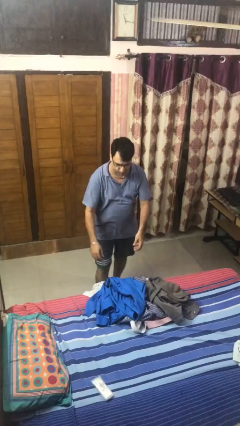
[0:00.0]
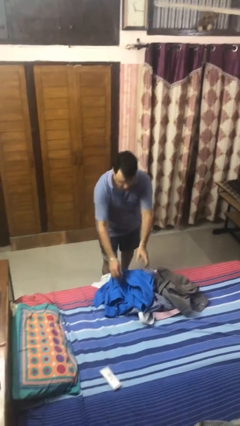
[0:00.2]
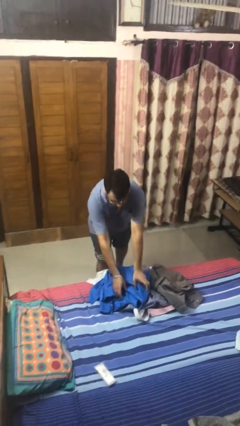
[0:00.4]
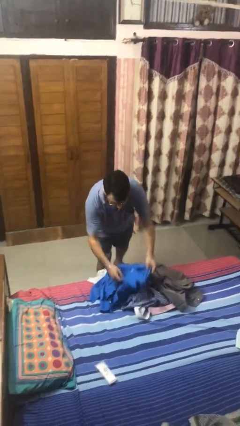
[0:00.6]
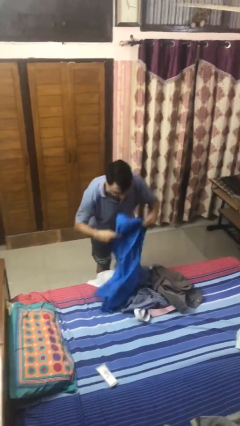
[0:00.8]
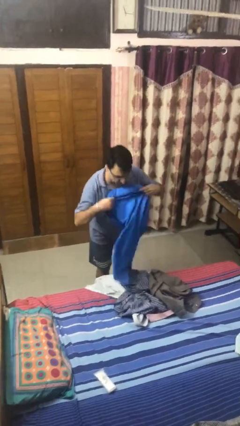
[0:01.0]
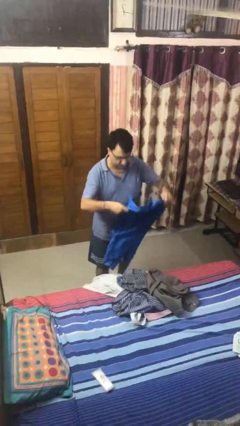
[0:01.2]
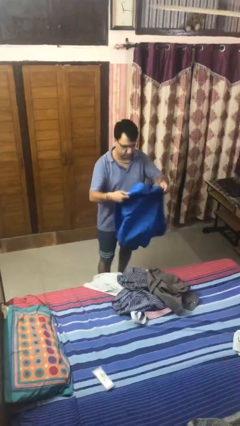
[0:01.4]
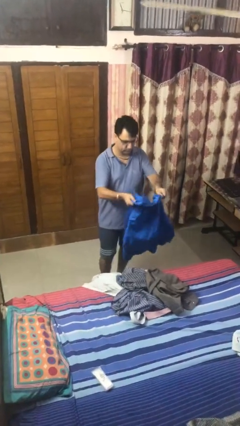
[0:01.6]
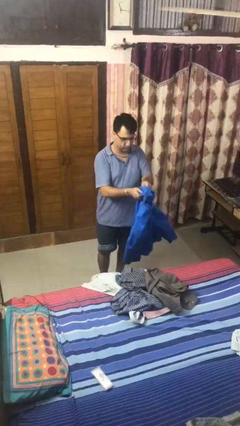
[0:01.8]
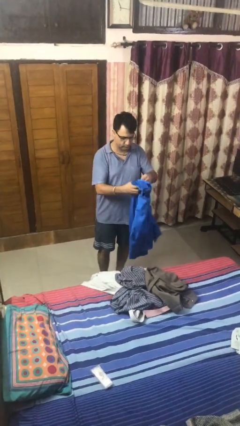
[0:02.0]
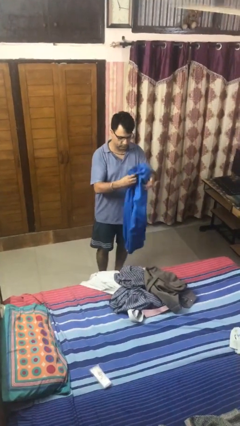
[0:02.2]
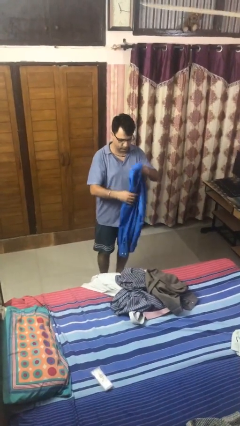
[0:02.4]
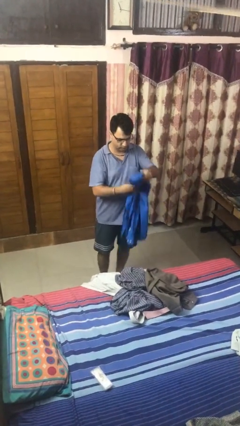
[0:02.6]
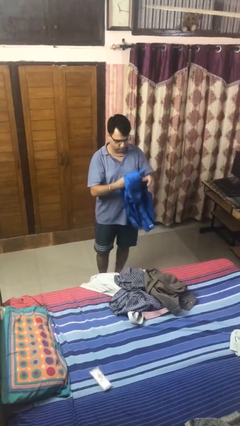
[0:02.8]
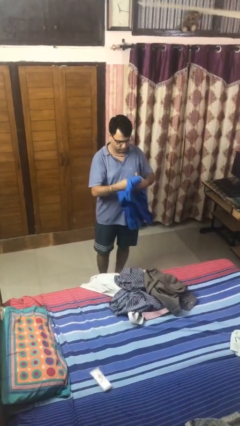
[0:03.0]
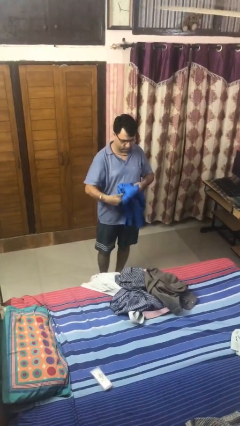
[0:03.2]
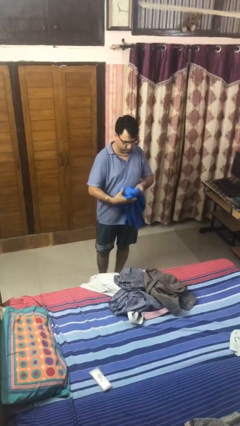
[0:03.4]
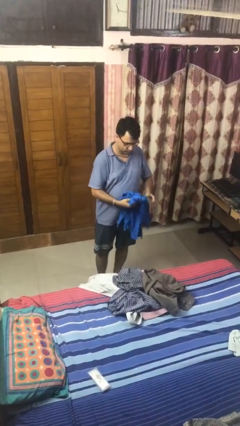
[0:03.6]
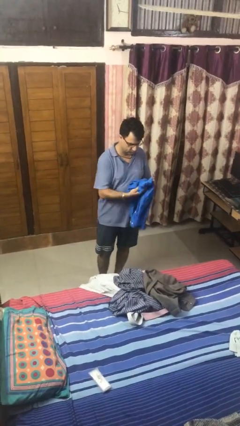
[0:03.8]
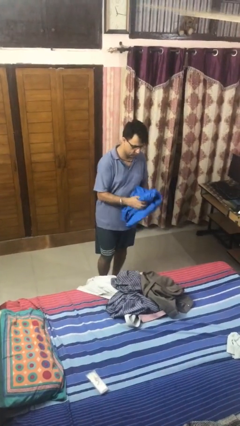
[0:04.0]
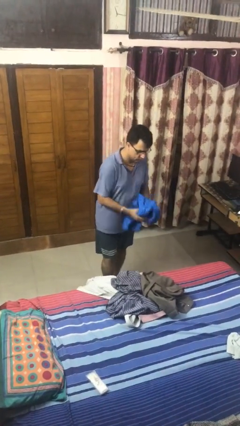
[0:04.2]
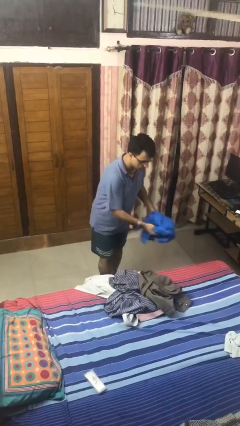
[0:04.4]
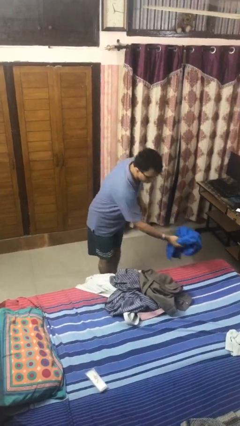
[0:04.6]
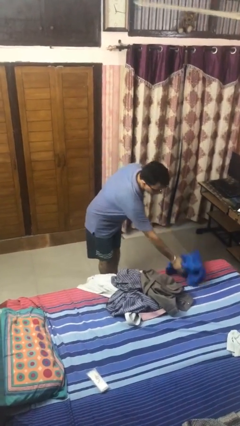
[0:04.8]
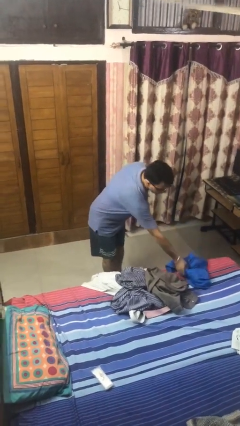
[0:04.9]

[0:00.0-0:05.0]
person folds shirt

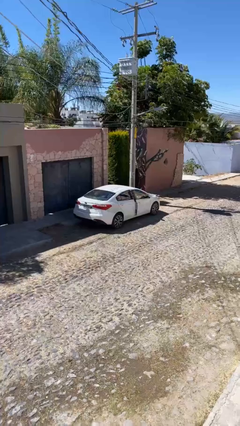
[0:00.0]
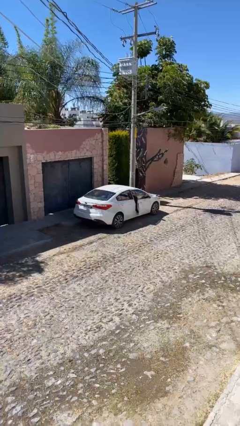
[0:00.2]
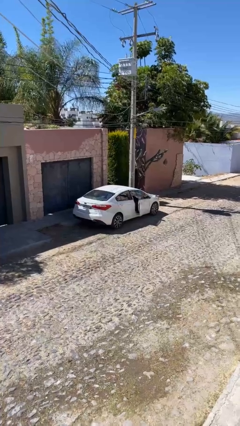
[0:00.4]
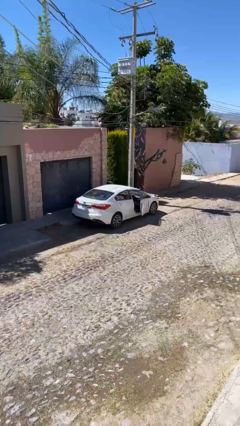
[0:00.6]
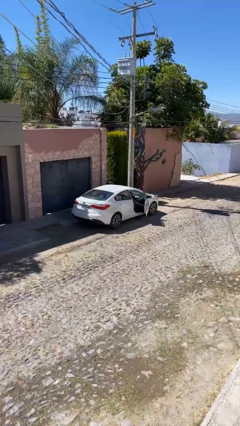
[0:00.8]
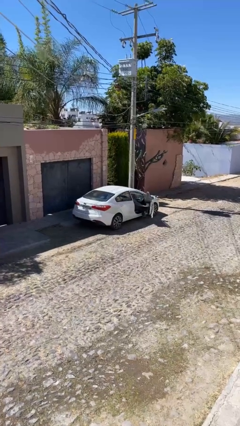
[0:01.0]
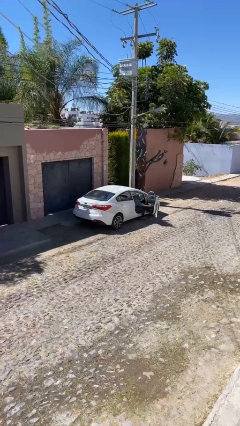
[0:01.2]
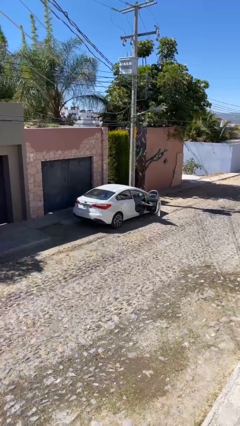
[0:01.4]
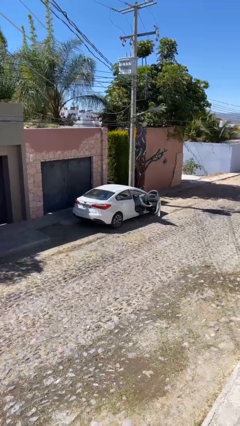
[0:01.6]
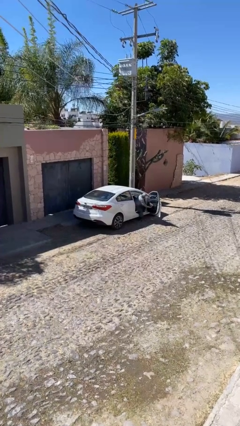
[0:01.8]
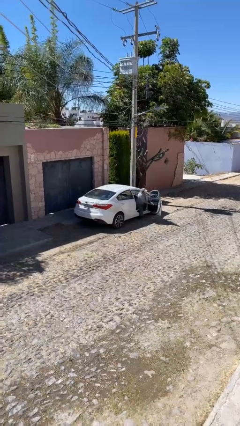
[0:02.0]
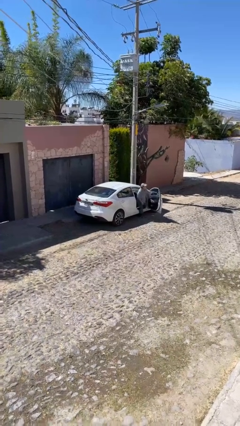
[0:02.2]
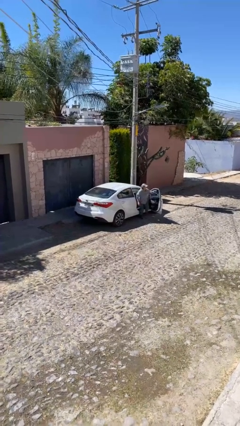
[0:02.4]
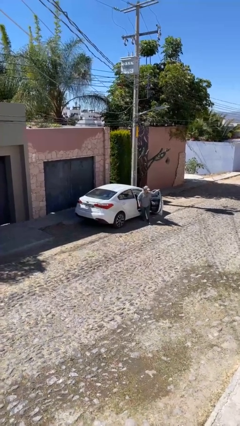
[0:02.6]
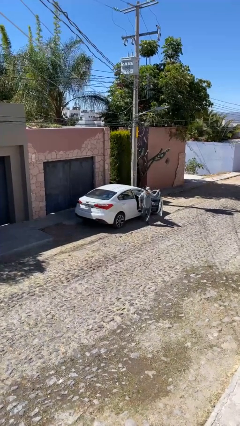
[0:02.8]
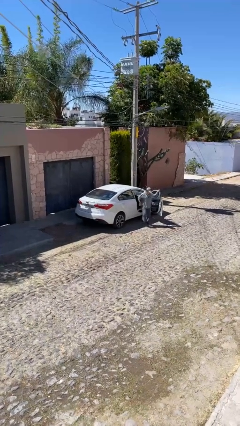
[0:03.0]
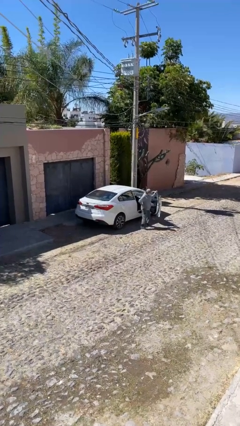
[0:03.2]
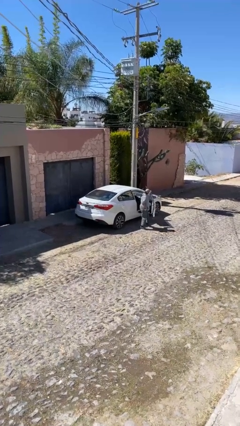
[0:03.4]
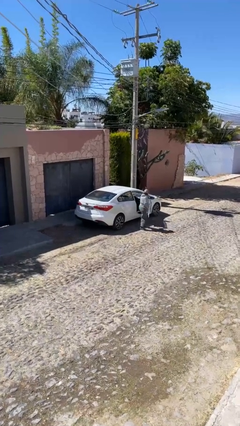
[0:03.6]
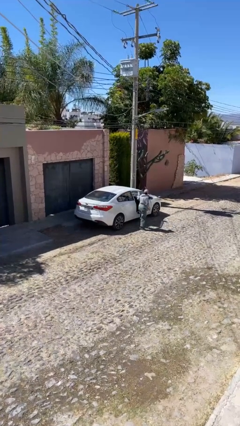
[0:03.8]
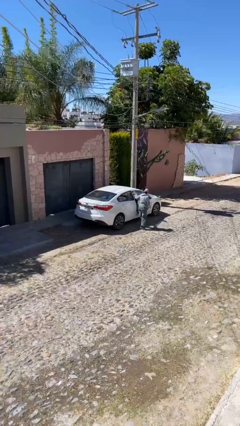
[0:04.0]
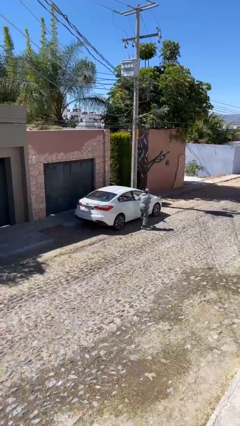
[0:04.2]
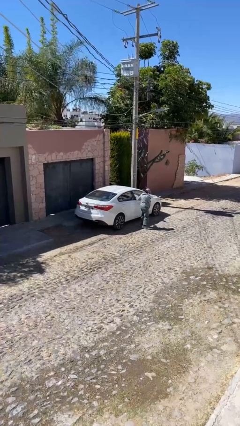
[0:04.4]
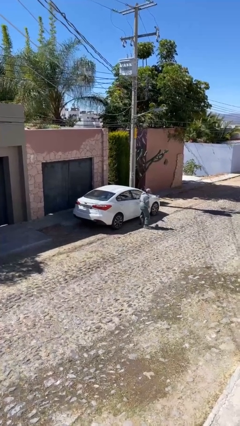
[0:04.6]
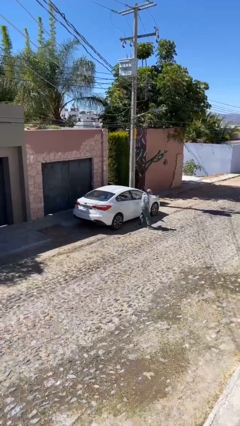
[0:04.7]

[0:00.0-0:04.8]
car drops off person

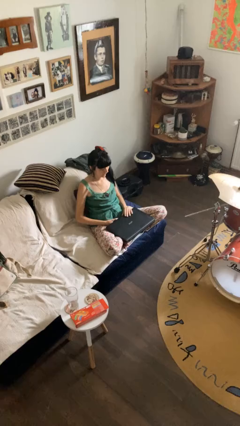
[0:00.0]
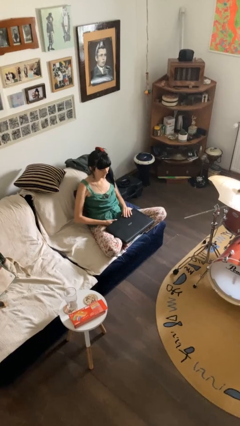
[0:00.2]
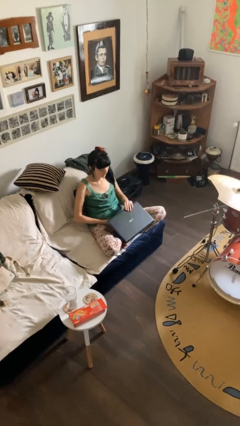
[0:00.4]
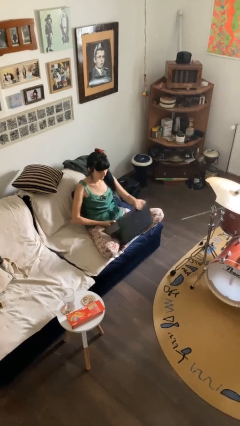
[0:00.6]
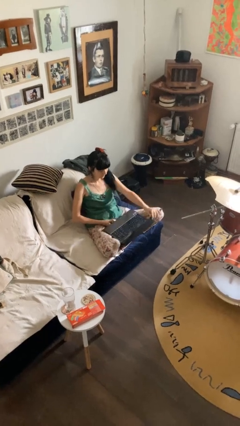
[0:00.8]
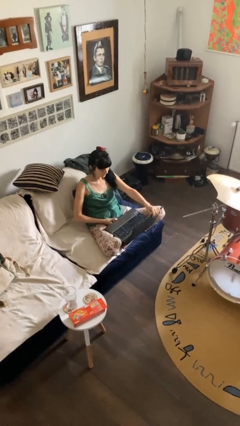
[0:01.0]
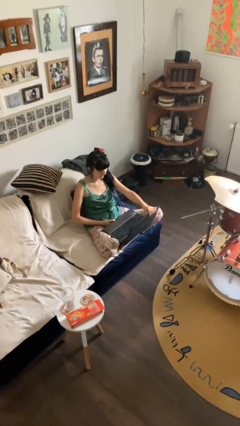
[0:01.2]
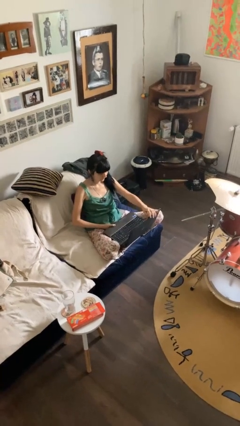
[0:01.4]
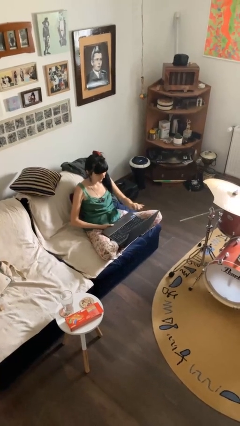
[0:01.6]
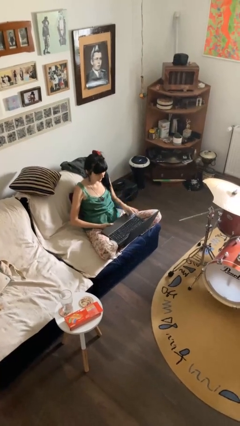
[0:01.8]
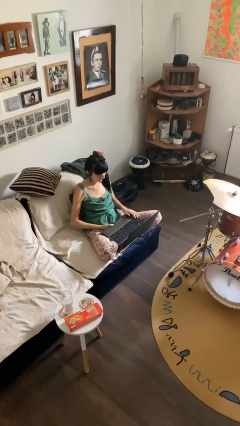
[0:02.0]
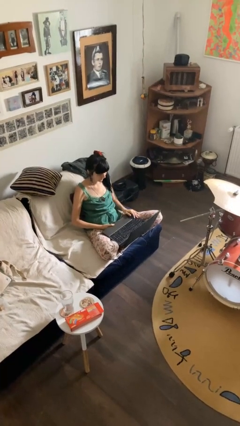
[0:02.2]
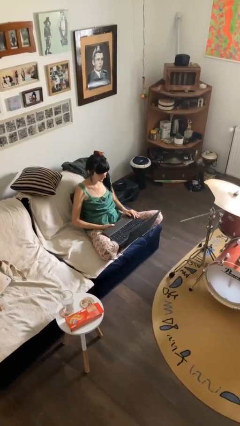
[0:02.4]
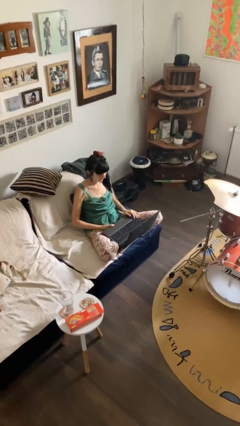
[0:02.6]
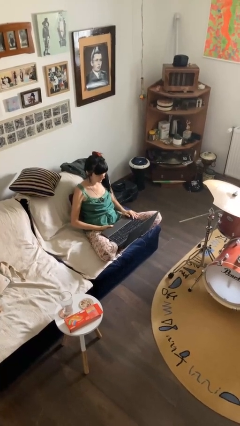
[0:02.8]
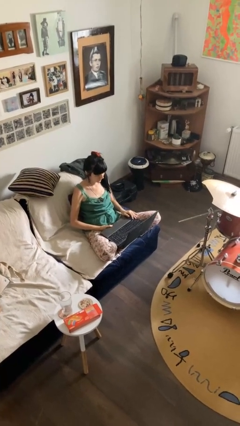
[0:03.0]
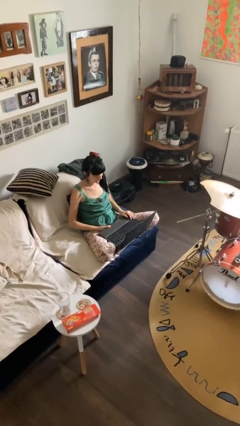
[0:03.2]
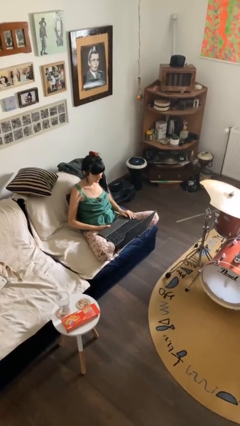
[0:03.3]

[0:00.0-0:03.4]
person opens laptop

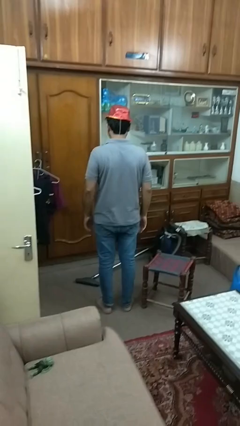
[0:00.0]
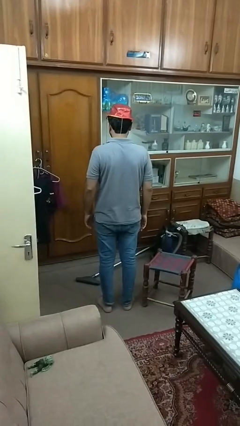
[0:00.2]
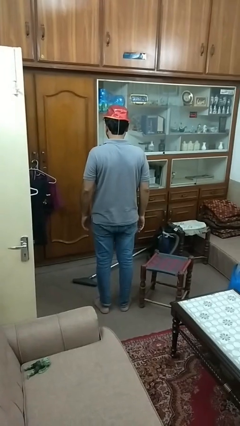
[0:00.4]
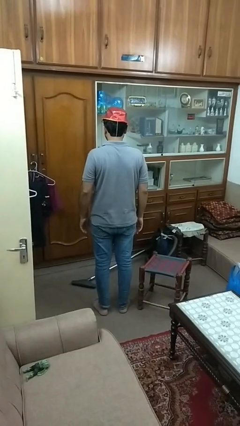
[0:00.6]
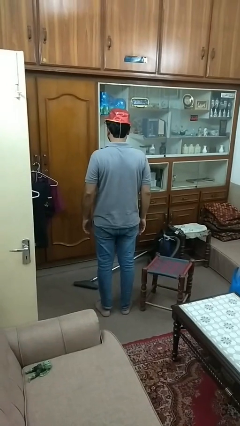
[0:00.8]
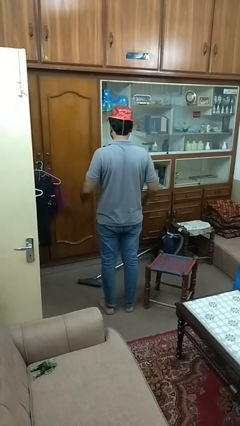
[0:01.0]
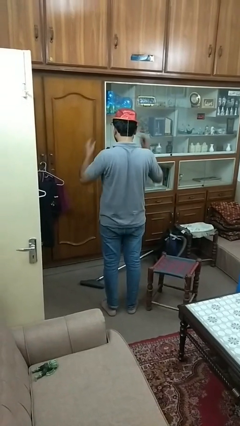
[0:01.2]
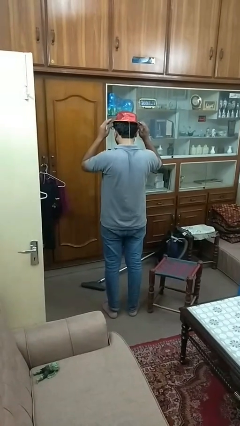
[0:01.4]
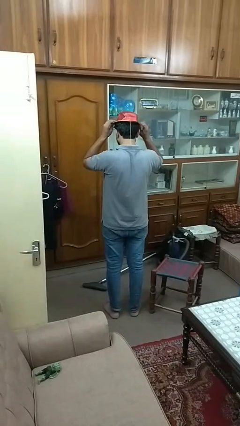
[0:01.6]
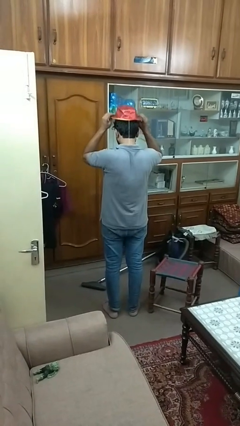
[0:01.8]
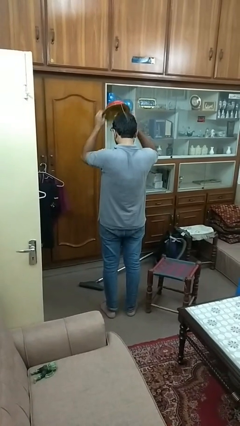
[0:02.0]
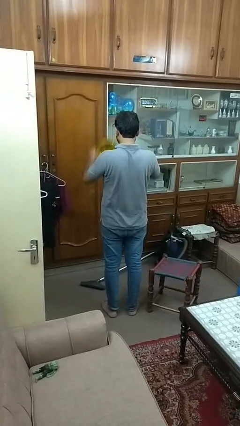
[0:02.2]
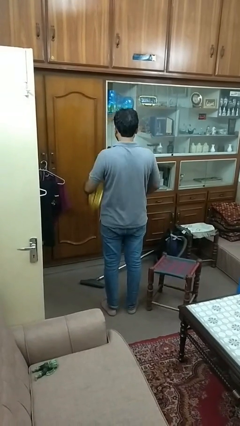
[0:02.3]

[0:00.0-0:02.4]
person takes off hat

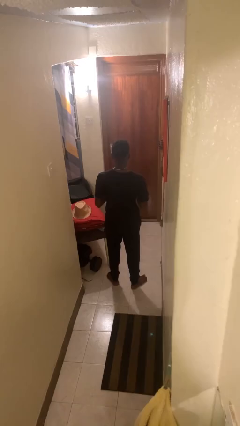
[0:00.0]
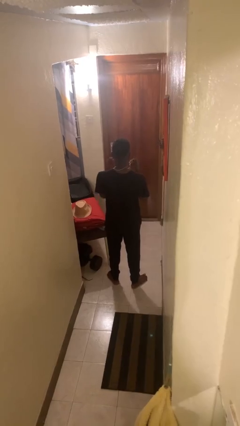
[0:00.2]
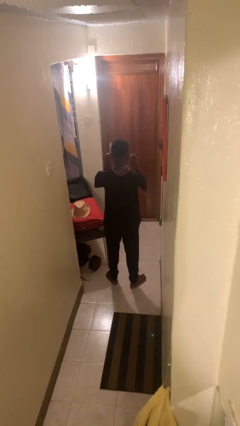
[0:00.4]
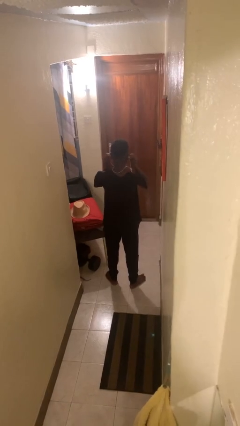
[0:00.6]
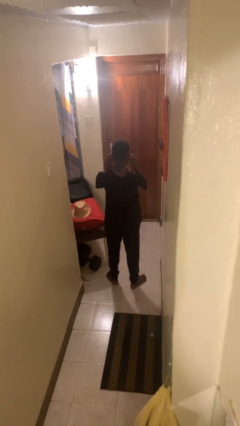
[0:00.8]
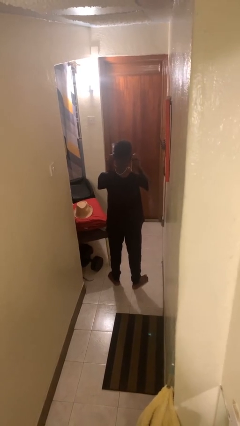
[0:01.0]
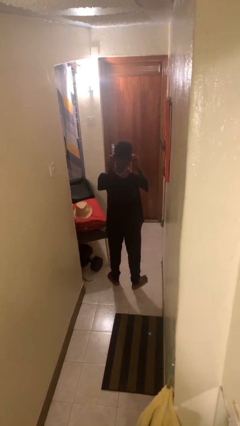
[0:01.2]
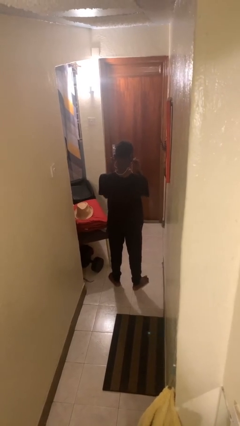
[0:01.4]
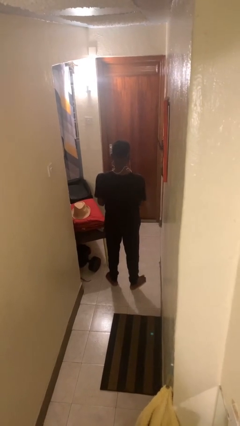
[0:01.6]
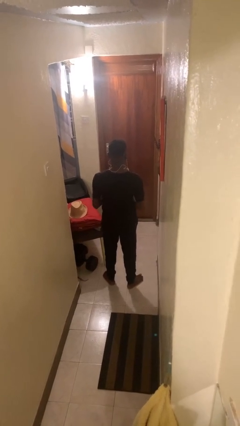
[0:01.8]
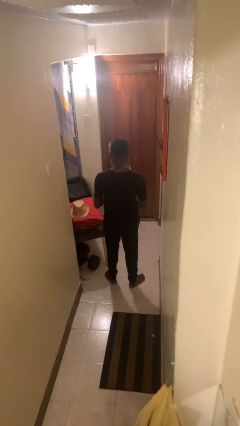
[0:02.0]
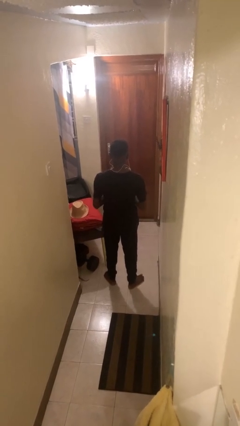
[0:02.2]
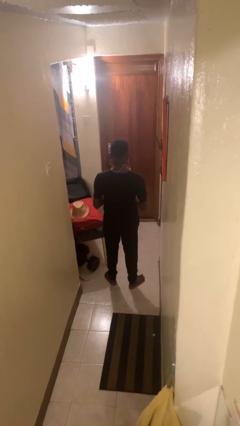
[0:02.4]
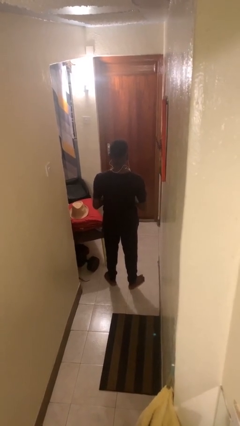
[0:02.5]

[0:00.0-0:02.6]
person puts on headphones
